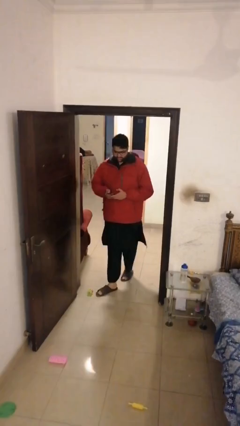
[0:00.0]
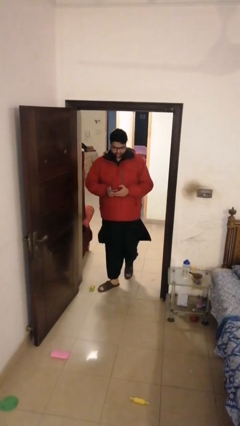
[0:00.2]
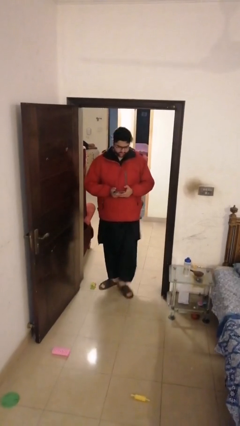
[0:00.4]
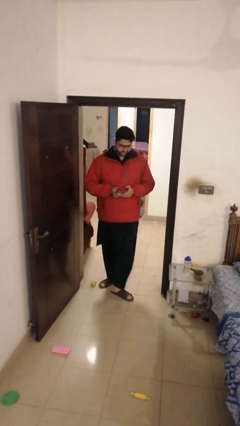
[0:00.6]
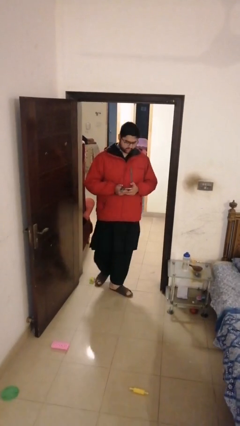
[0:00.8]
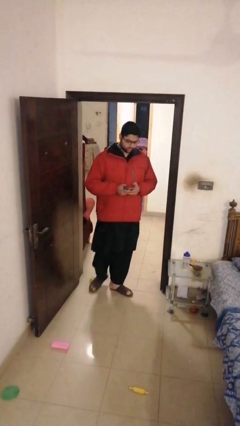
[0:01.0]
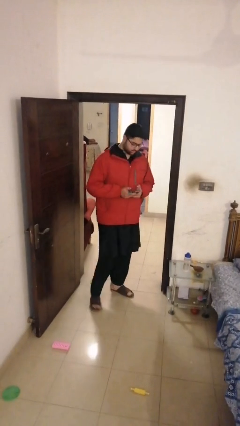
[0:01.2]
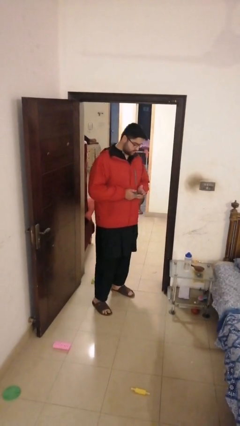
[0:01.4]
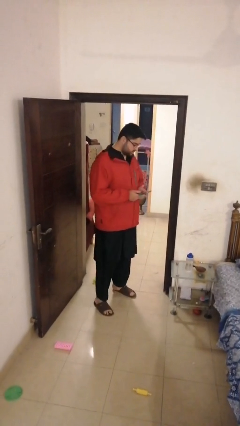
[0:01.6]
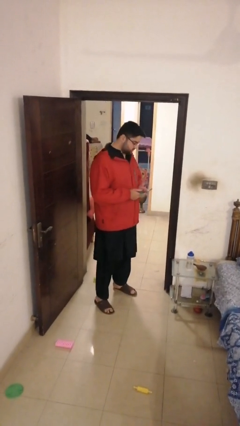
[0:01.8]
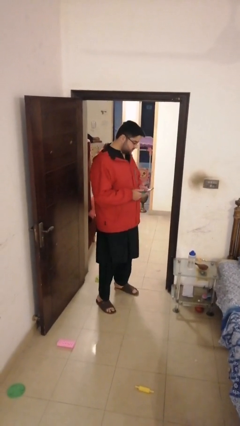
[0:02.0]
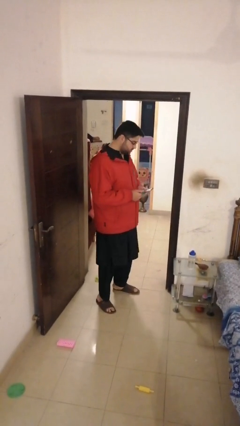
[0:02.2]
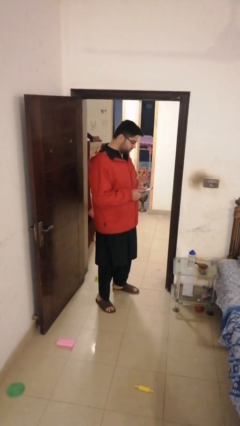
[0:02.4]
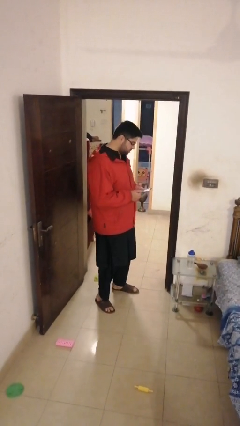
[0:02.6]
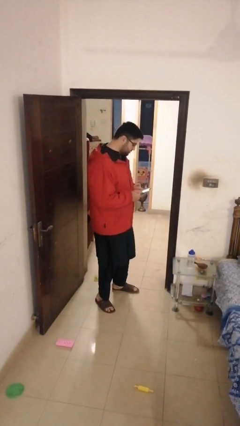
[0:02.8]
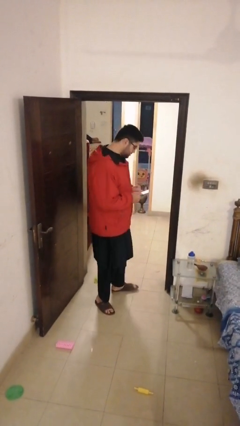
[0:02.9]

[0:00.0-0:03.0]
person enters scene through structure

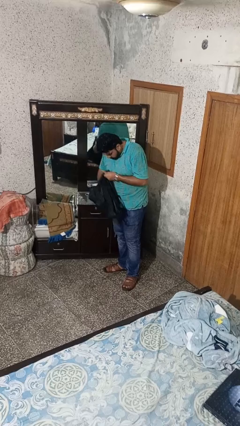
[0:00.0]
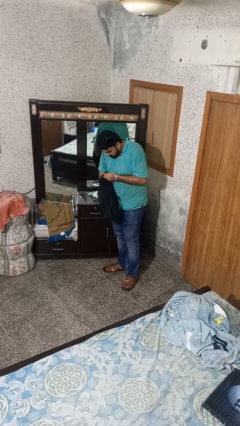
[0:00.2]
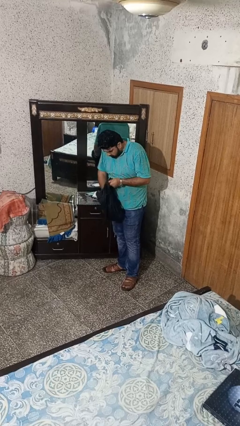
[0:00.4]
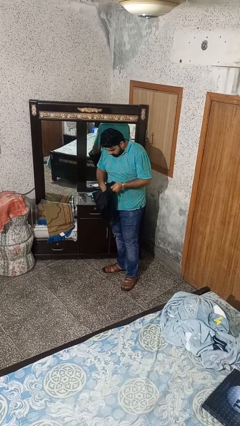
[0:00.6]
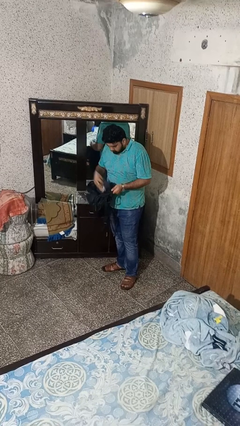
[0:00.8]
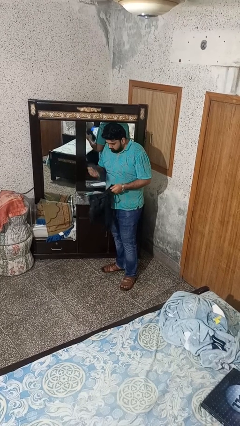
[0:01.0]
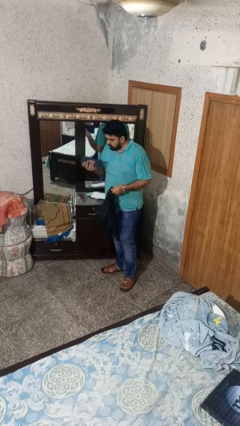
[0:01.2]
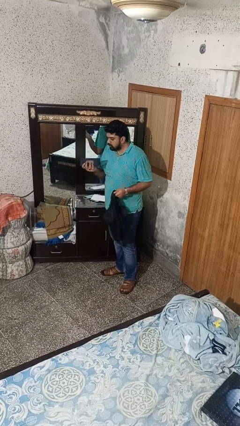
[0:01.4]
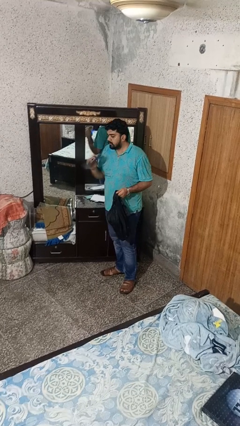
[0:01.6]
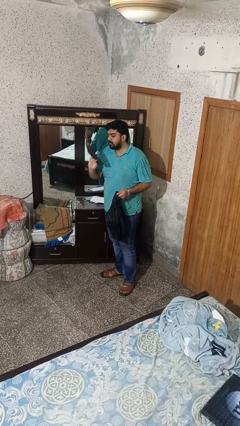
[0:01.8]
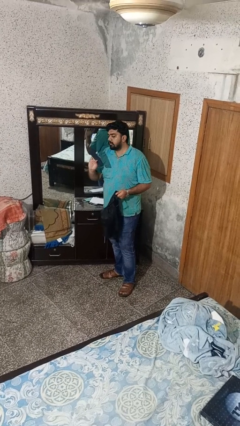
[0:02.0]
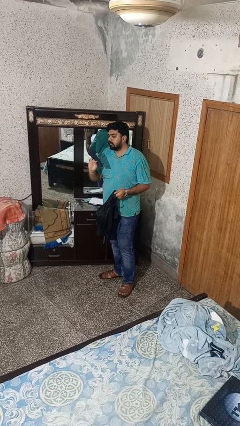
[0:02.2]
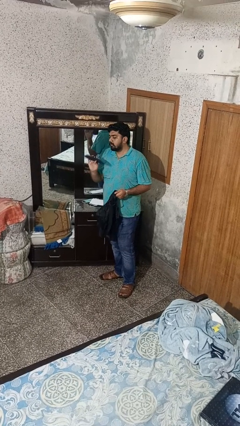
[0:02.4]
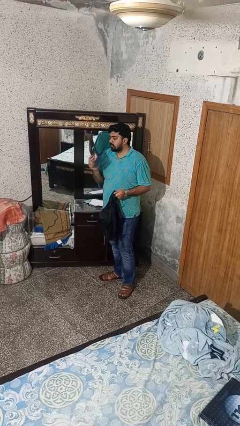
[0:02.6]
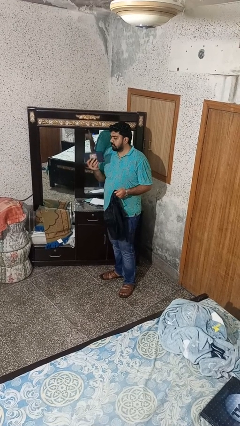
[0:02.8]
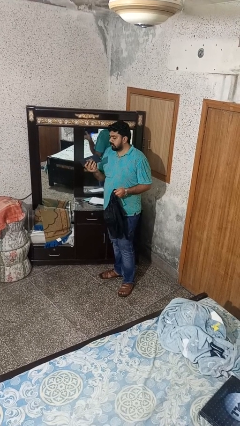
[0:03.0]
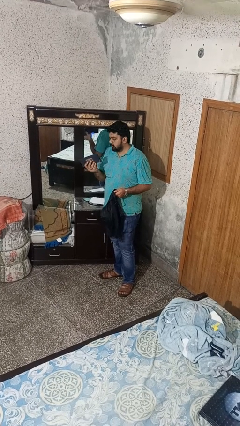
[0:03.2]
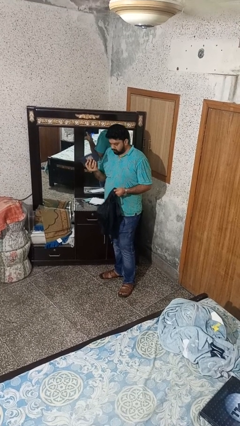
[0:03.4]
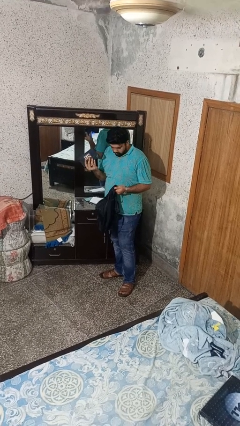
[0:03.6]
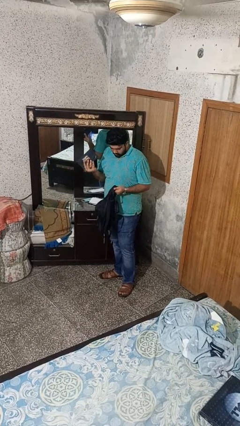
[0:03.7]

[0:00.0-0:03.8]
person takes object from backpack

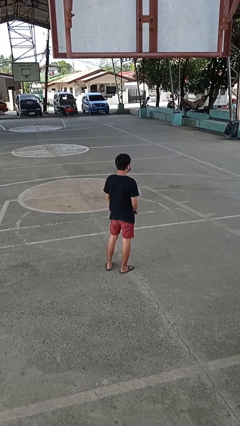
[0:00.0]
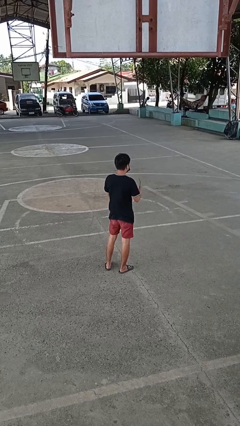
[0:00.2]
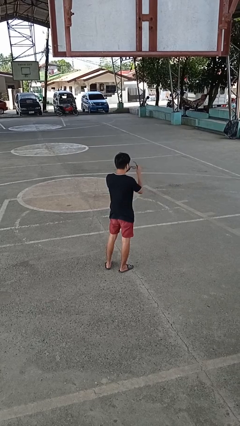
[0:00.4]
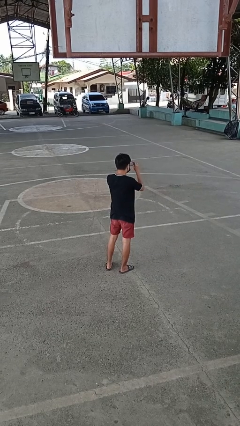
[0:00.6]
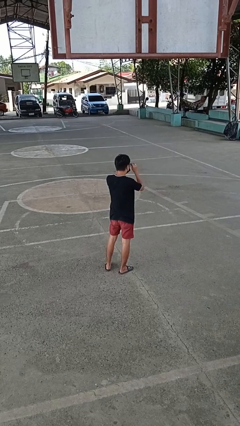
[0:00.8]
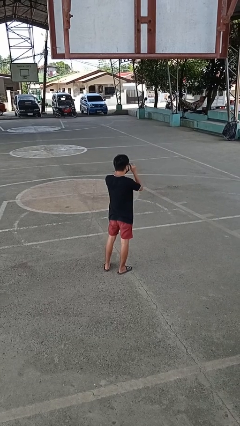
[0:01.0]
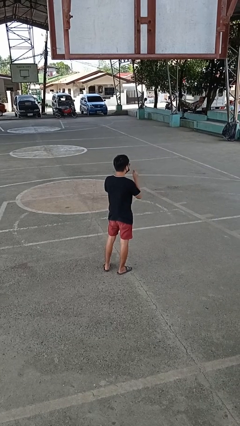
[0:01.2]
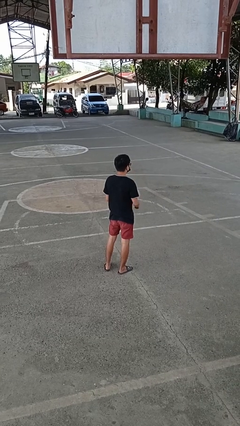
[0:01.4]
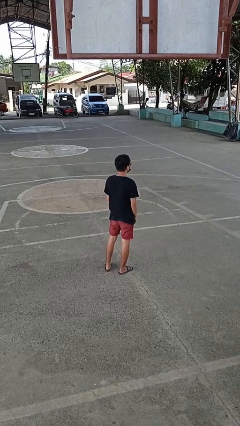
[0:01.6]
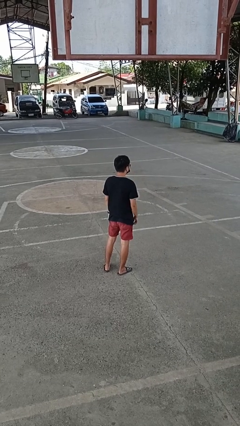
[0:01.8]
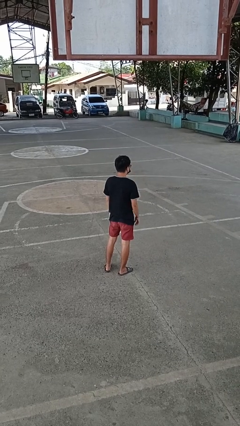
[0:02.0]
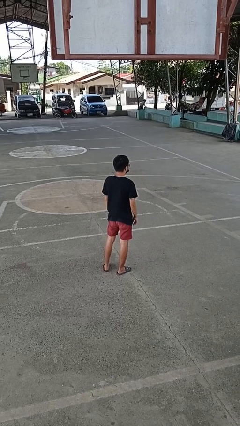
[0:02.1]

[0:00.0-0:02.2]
person puts on glasses

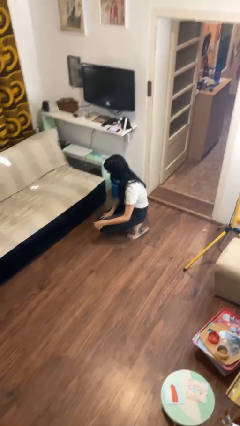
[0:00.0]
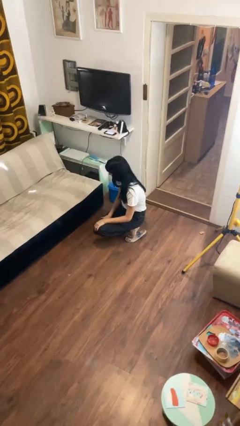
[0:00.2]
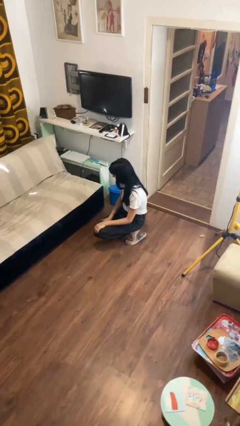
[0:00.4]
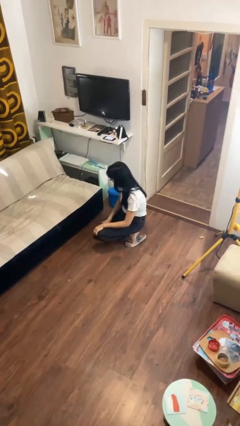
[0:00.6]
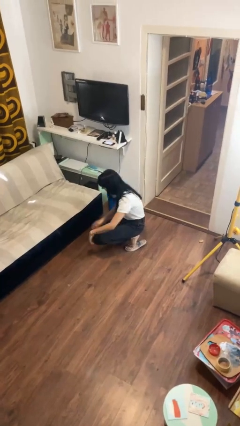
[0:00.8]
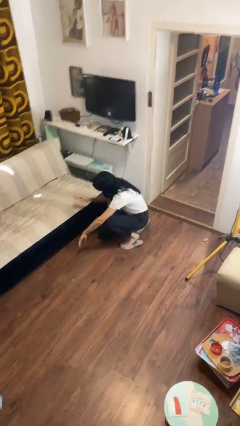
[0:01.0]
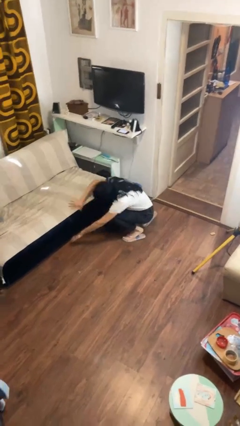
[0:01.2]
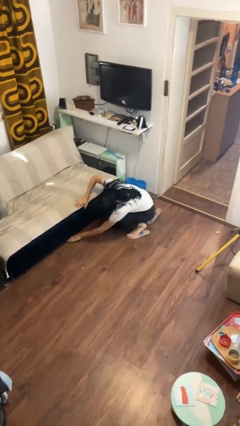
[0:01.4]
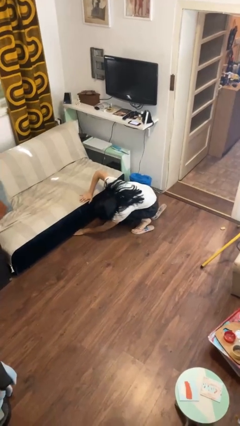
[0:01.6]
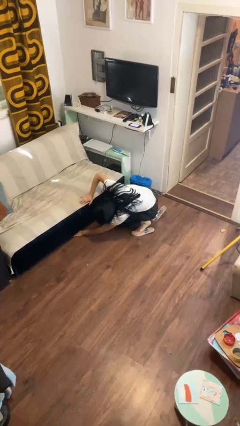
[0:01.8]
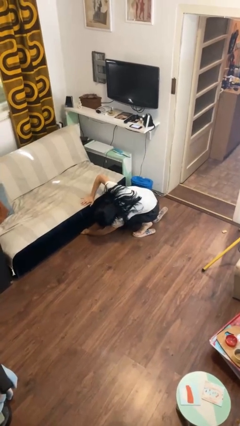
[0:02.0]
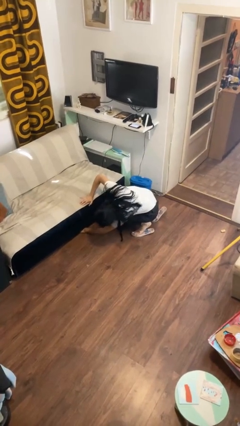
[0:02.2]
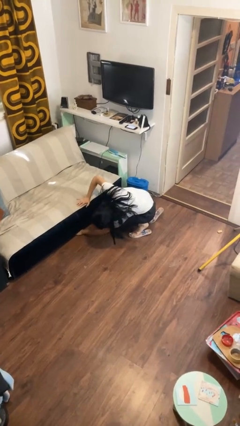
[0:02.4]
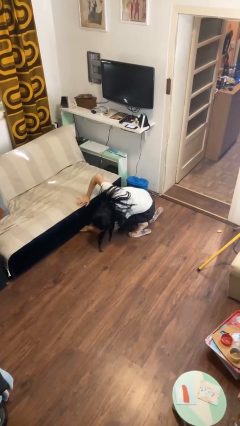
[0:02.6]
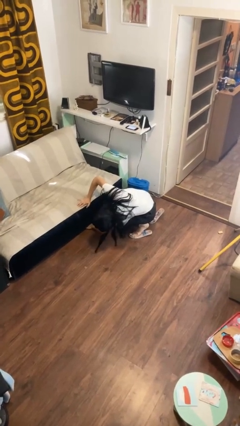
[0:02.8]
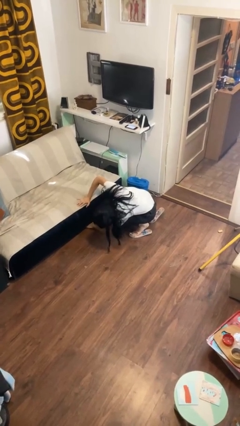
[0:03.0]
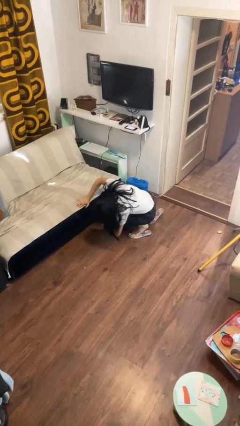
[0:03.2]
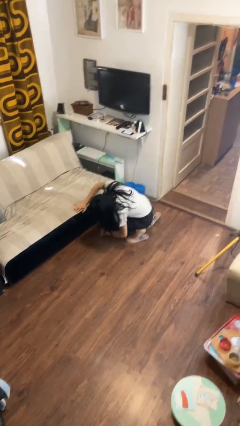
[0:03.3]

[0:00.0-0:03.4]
person searches under couch

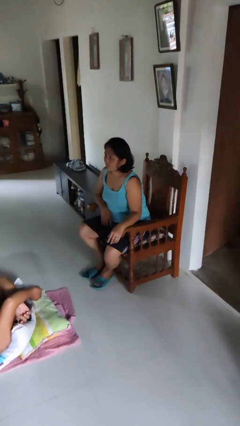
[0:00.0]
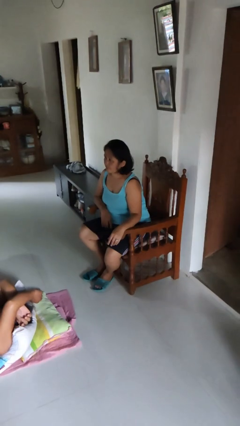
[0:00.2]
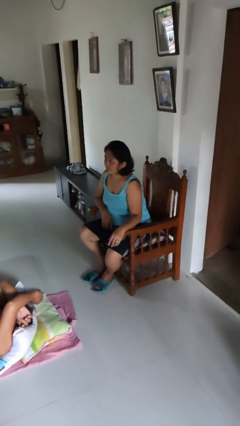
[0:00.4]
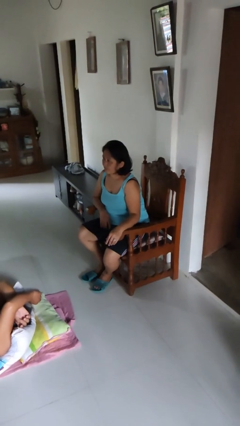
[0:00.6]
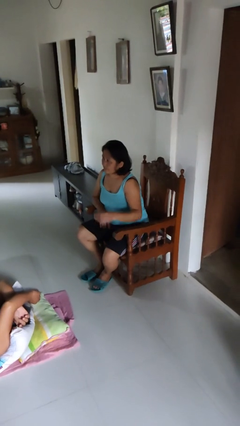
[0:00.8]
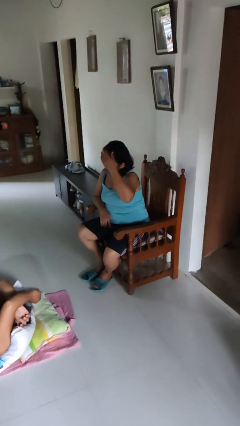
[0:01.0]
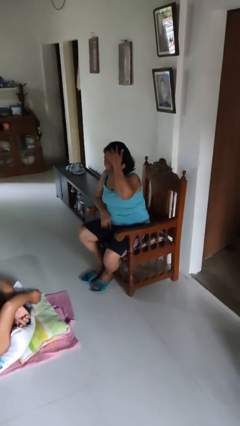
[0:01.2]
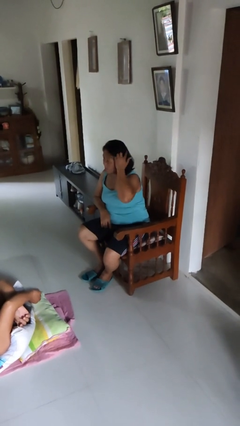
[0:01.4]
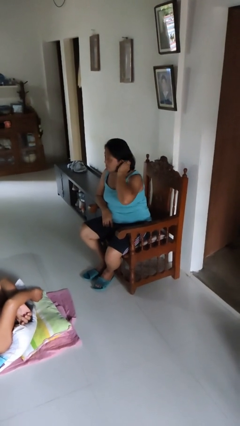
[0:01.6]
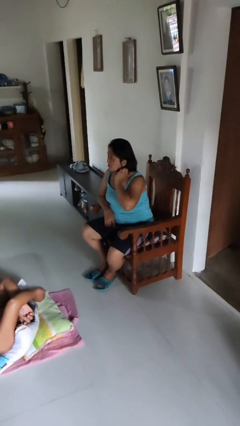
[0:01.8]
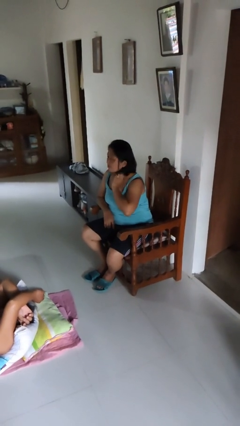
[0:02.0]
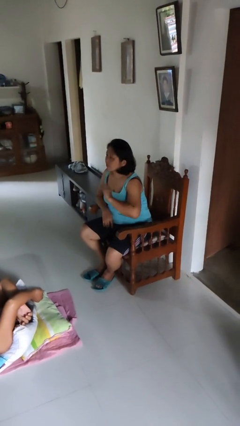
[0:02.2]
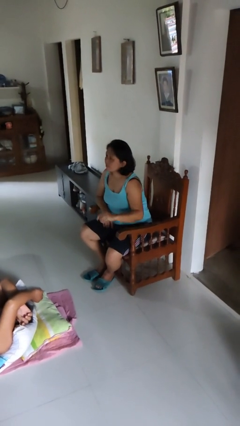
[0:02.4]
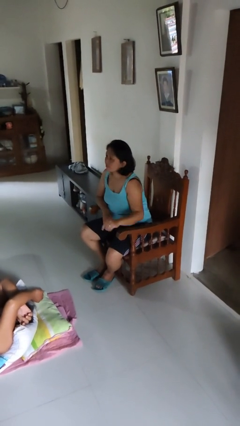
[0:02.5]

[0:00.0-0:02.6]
person strokes hair

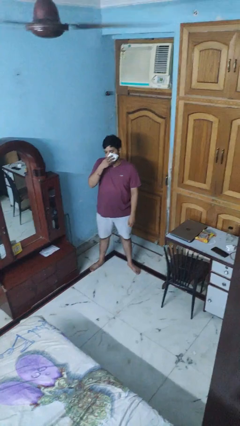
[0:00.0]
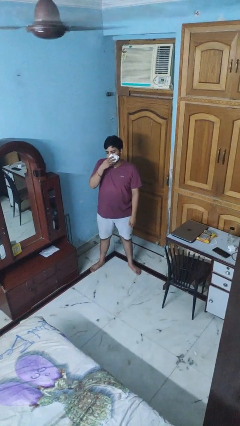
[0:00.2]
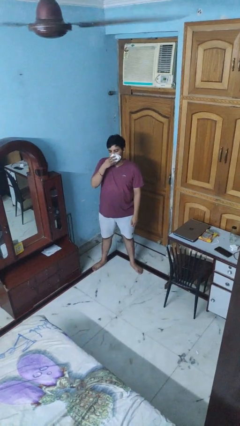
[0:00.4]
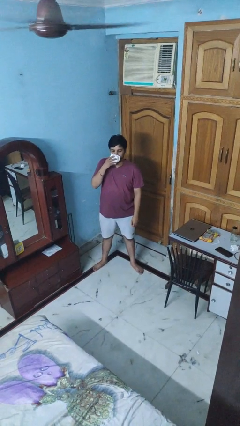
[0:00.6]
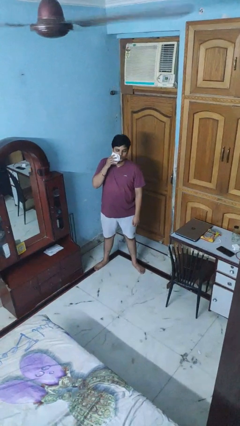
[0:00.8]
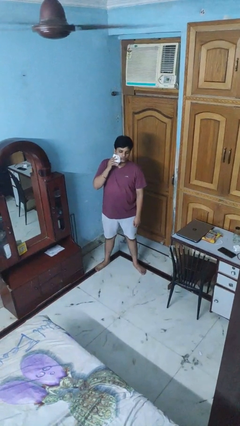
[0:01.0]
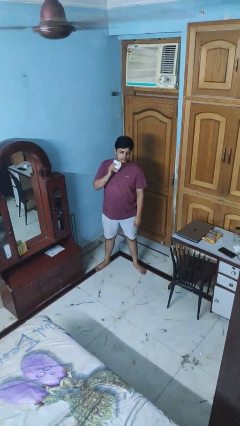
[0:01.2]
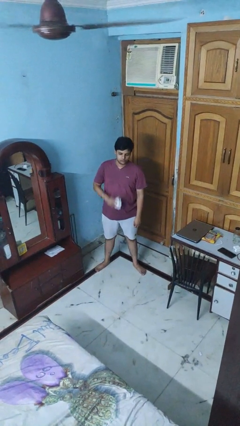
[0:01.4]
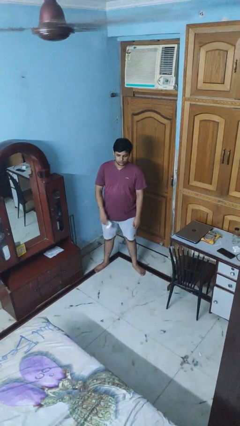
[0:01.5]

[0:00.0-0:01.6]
person wipes mouth with napkin

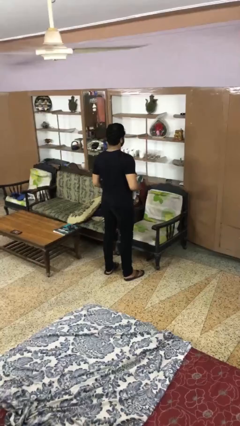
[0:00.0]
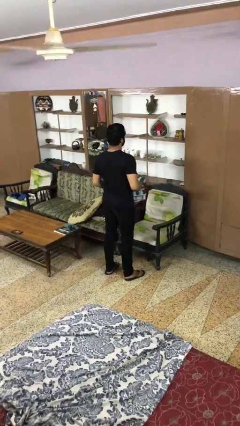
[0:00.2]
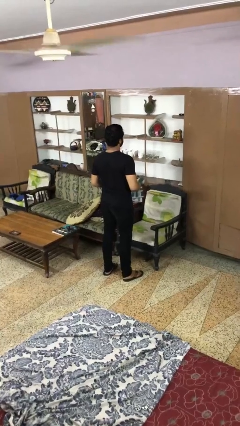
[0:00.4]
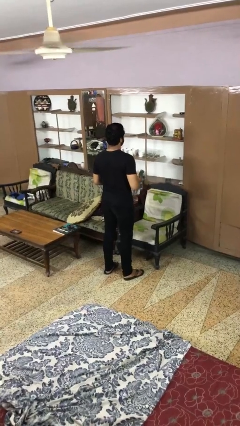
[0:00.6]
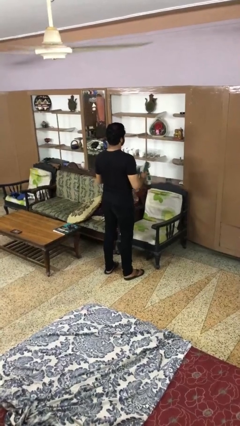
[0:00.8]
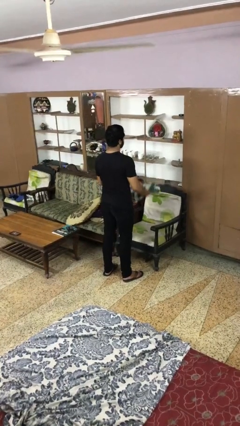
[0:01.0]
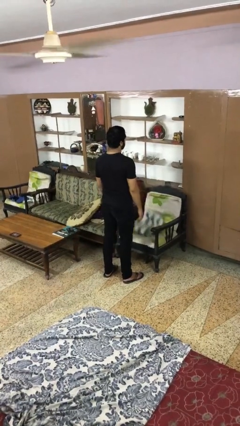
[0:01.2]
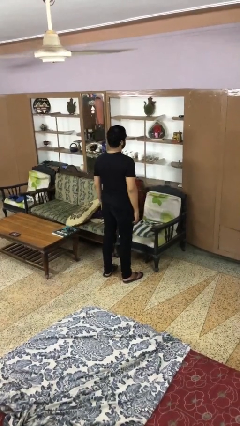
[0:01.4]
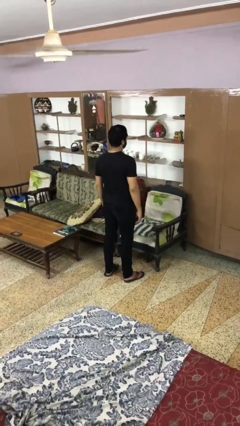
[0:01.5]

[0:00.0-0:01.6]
person puts down object on couch
